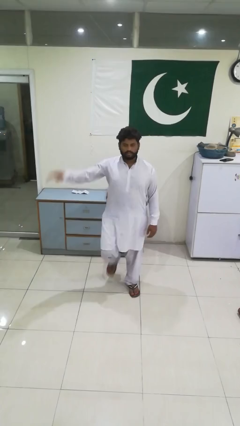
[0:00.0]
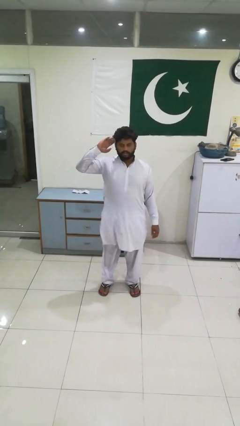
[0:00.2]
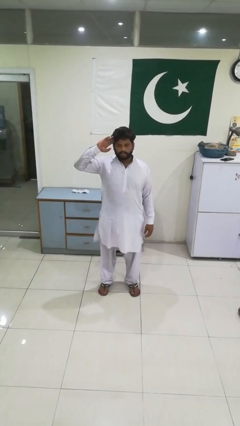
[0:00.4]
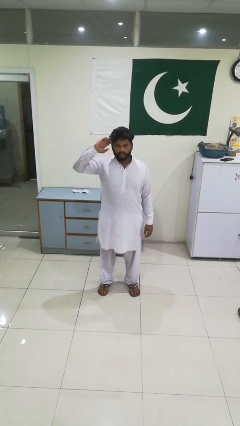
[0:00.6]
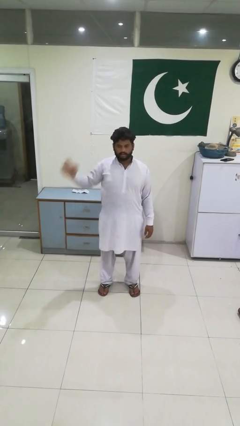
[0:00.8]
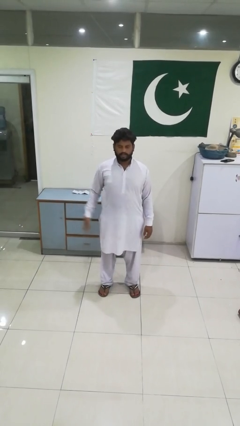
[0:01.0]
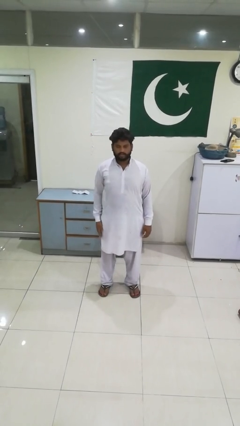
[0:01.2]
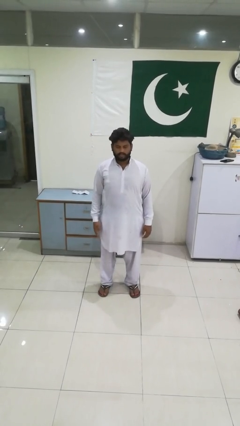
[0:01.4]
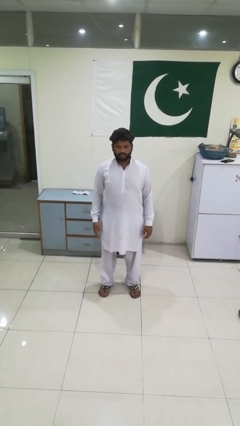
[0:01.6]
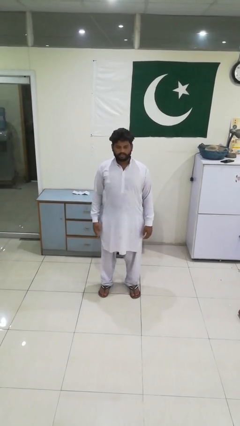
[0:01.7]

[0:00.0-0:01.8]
person salutes

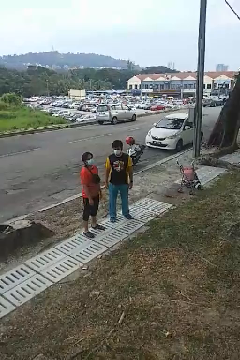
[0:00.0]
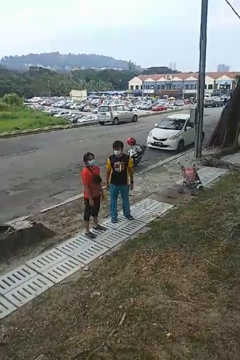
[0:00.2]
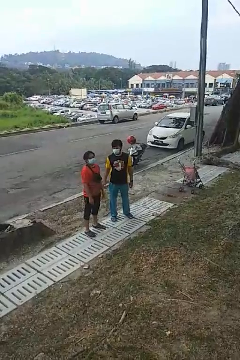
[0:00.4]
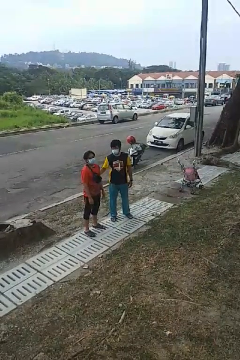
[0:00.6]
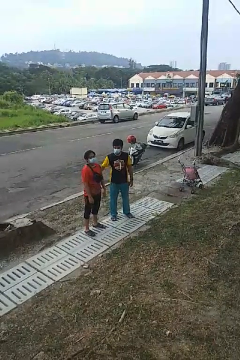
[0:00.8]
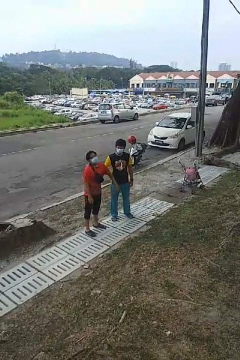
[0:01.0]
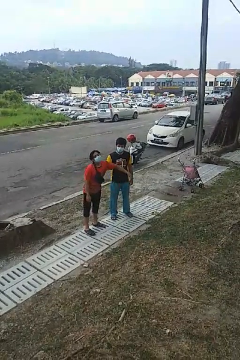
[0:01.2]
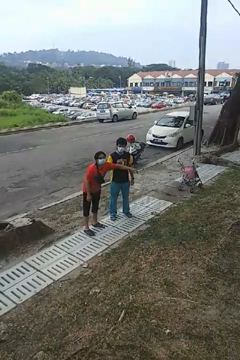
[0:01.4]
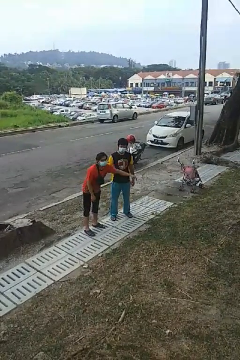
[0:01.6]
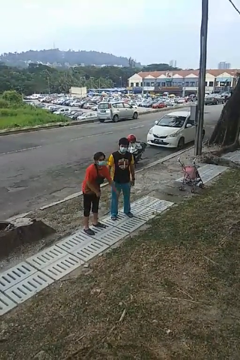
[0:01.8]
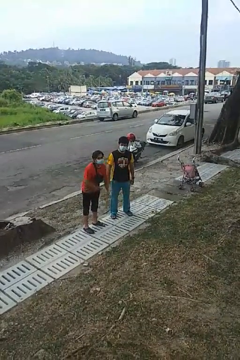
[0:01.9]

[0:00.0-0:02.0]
person grabs person by bicep

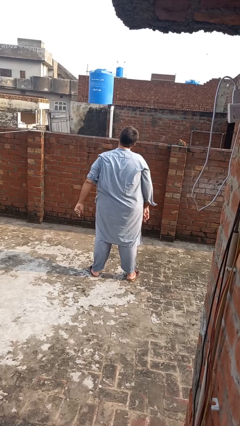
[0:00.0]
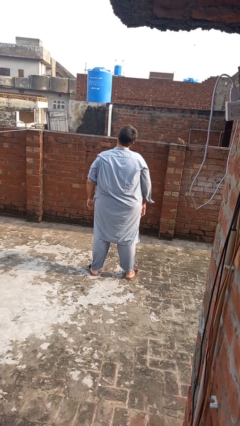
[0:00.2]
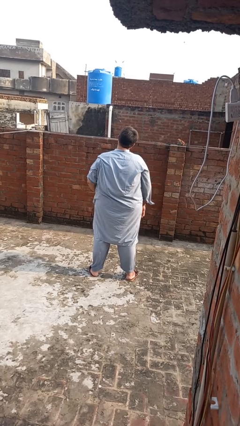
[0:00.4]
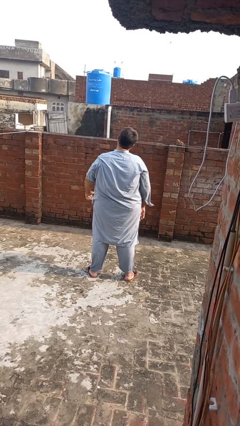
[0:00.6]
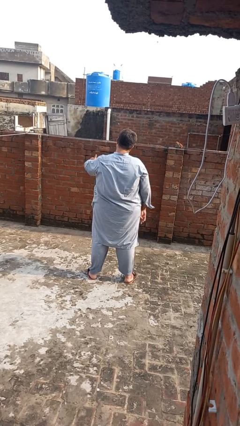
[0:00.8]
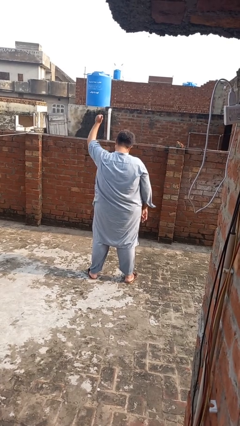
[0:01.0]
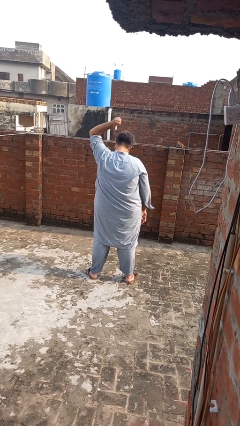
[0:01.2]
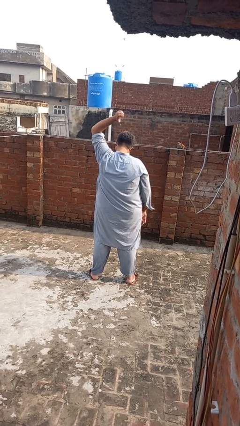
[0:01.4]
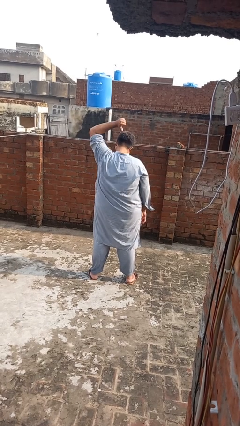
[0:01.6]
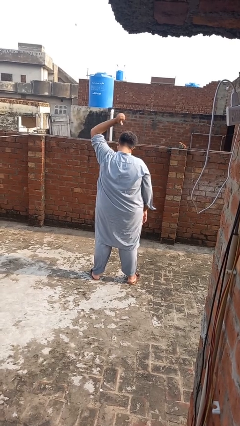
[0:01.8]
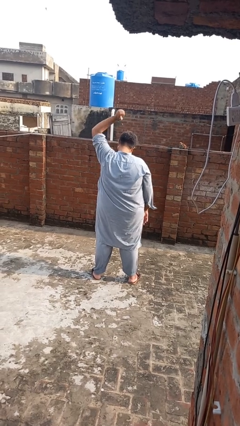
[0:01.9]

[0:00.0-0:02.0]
person gestures behind me

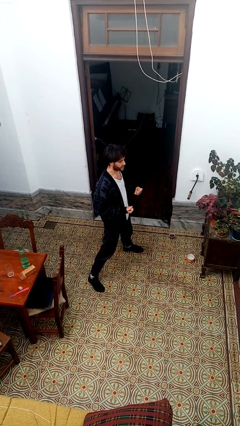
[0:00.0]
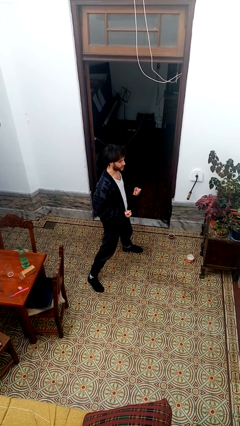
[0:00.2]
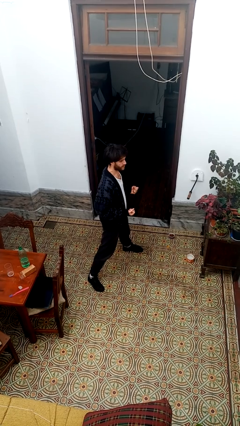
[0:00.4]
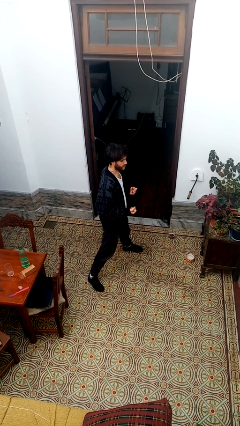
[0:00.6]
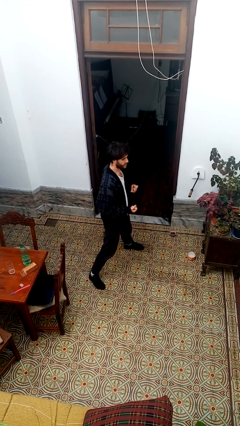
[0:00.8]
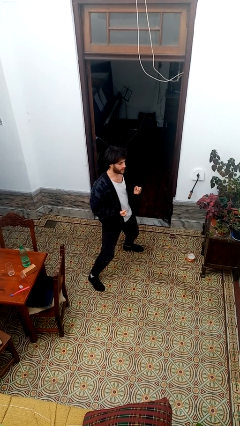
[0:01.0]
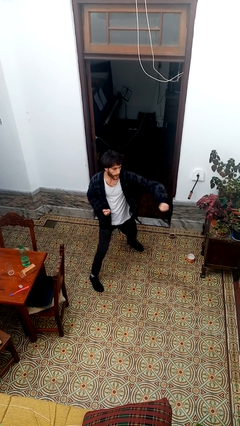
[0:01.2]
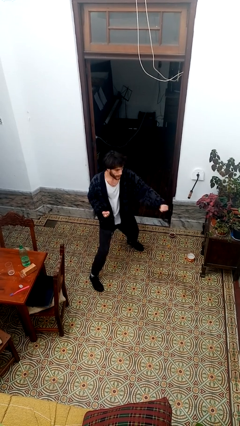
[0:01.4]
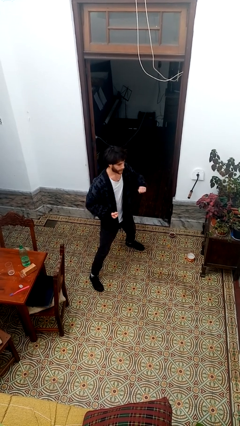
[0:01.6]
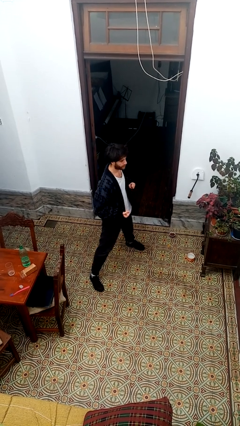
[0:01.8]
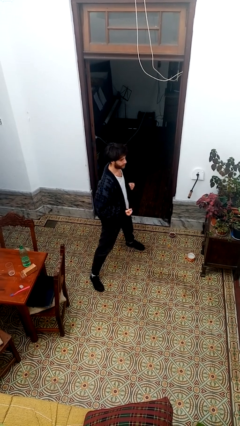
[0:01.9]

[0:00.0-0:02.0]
person punches

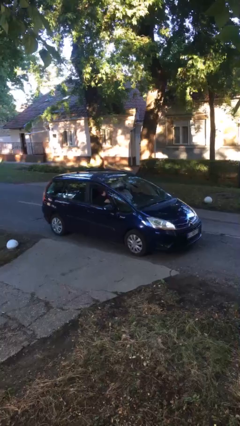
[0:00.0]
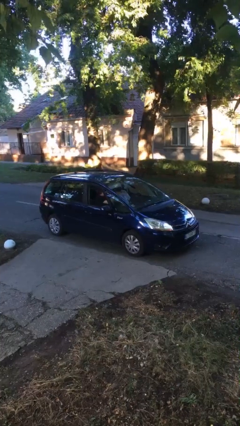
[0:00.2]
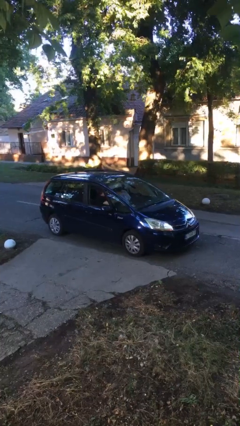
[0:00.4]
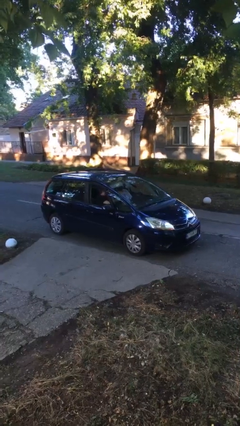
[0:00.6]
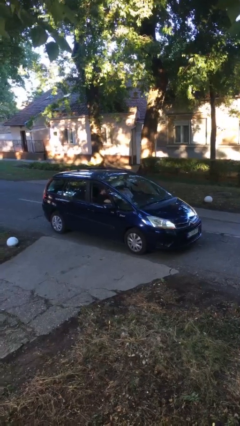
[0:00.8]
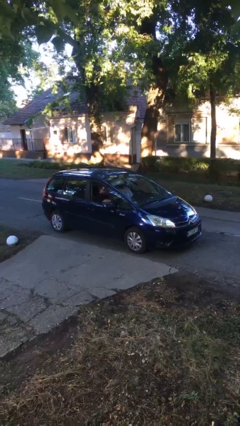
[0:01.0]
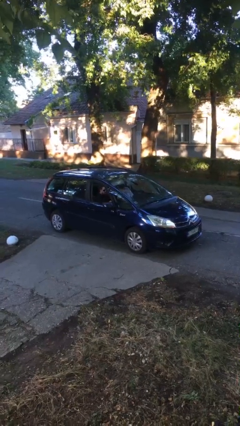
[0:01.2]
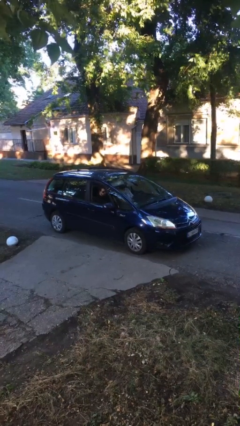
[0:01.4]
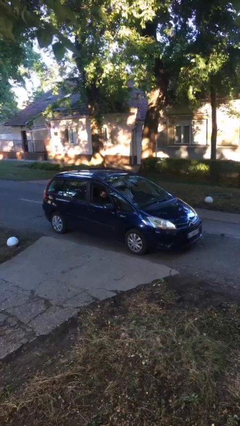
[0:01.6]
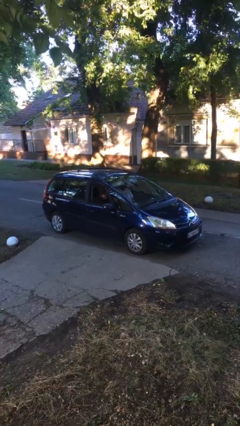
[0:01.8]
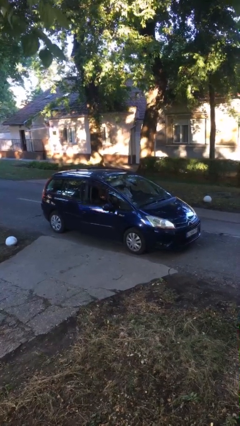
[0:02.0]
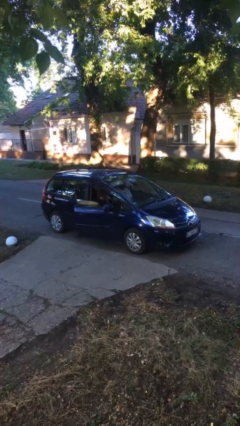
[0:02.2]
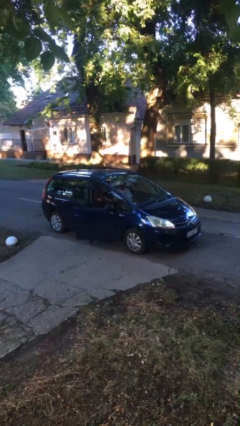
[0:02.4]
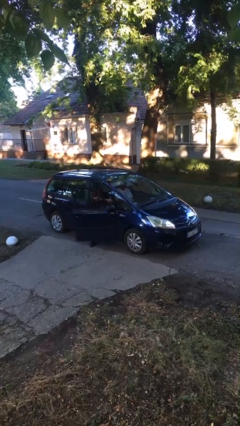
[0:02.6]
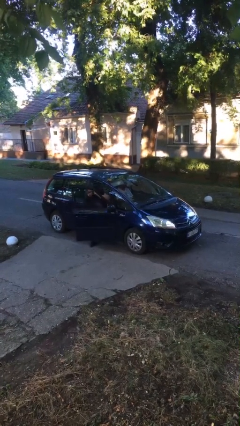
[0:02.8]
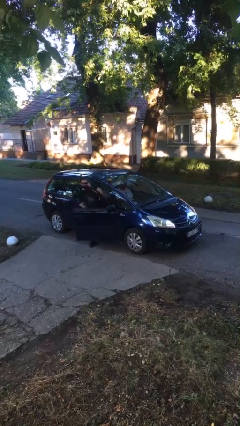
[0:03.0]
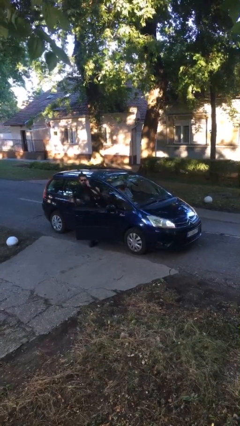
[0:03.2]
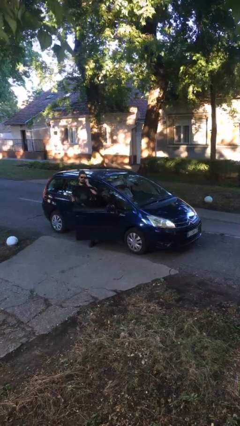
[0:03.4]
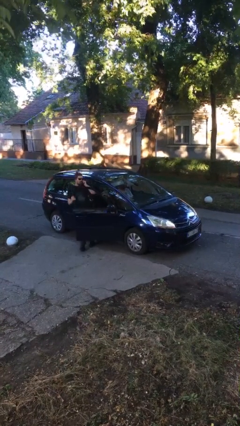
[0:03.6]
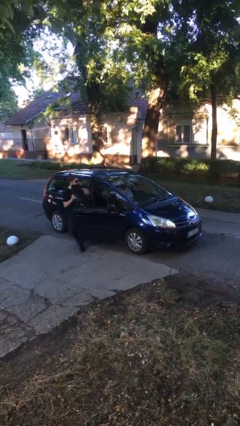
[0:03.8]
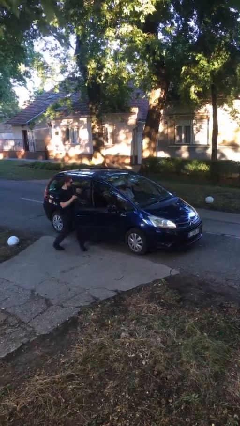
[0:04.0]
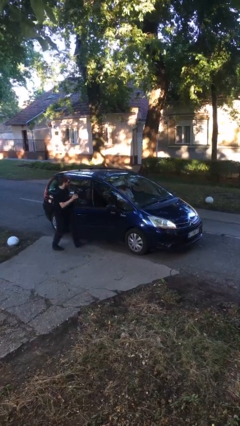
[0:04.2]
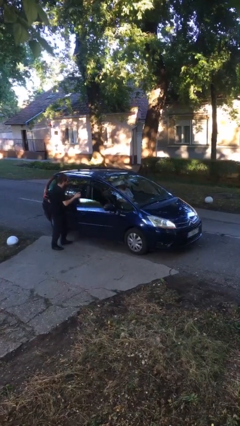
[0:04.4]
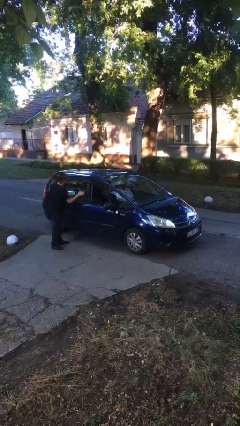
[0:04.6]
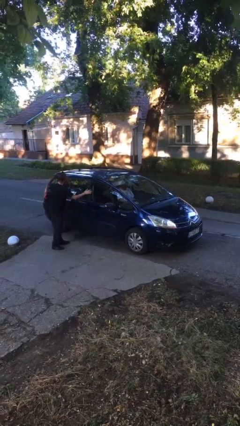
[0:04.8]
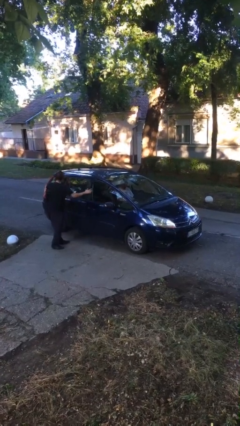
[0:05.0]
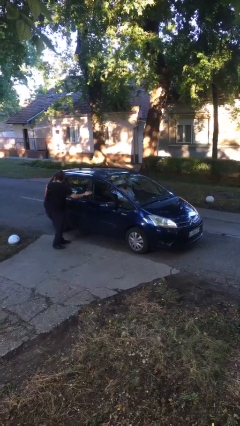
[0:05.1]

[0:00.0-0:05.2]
car drops off person

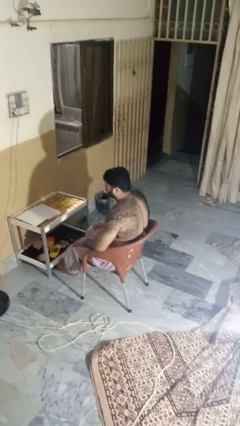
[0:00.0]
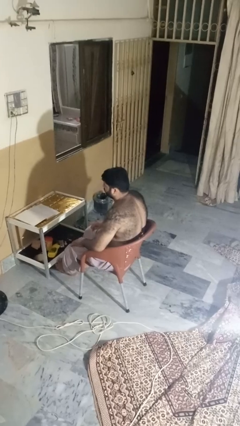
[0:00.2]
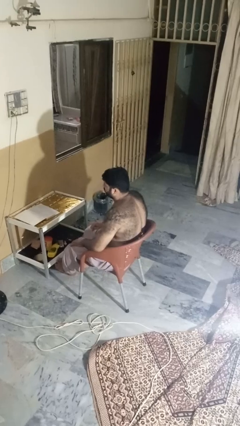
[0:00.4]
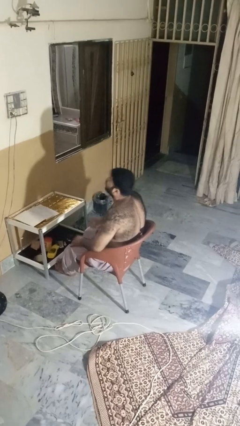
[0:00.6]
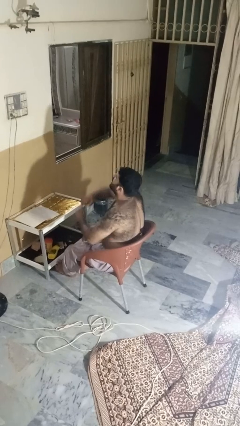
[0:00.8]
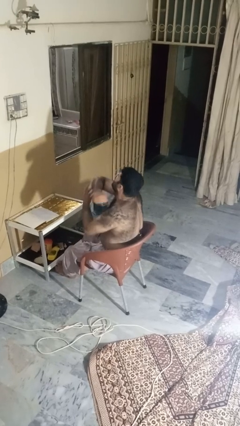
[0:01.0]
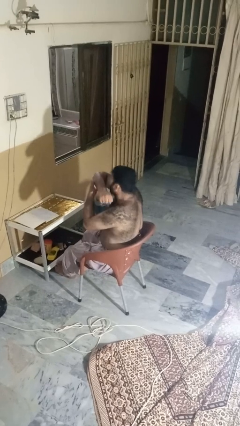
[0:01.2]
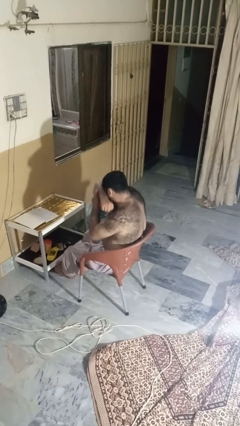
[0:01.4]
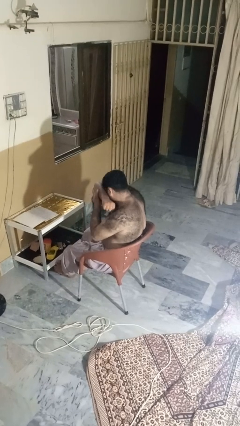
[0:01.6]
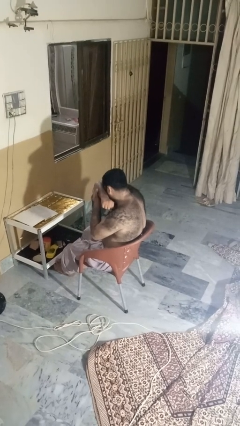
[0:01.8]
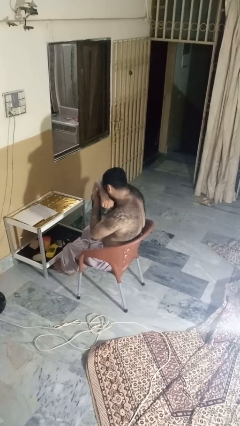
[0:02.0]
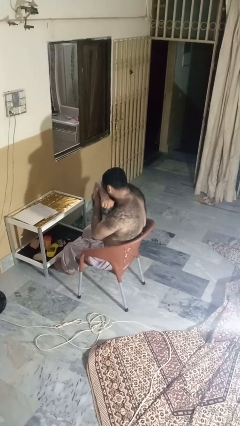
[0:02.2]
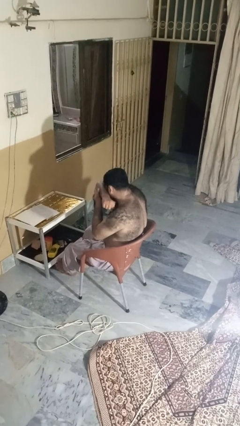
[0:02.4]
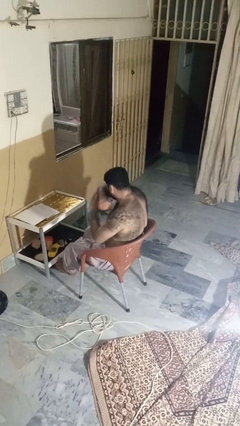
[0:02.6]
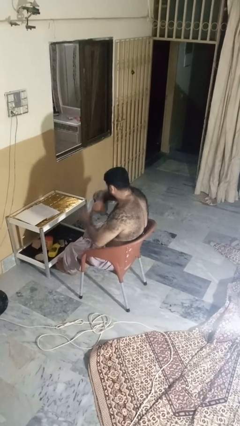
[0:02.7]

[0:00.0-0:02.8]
person sneezes into arm

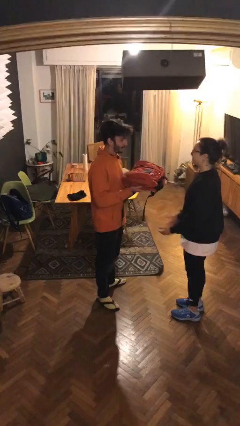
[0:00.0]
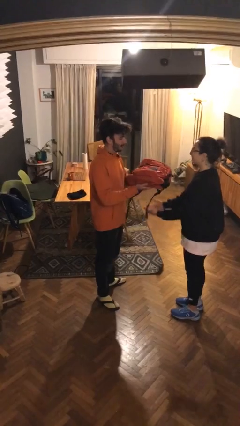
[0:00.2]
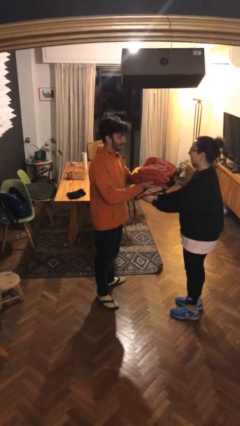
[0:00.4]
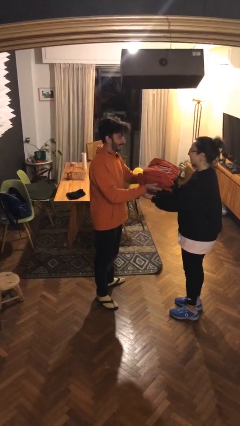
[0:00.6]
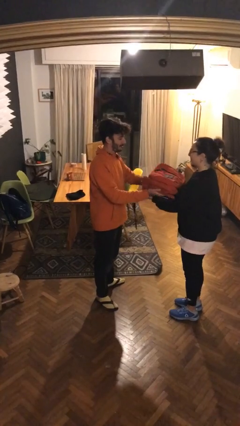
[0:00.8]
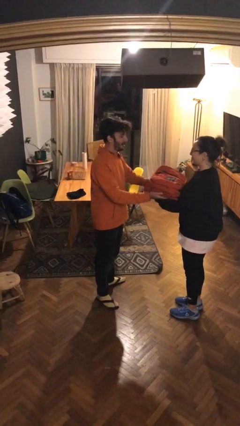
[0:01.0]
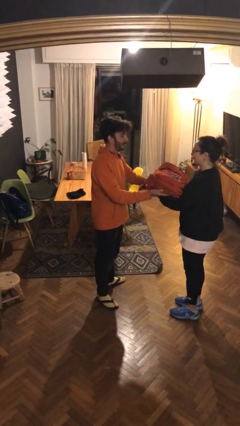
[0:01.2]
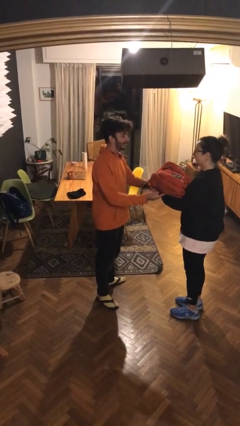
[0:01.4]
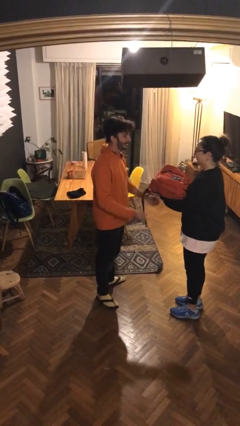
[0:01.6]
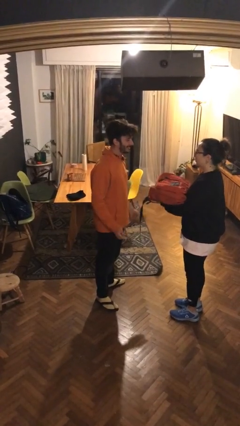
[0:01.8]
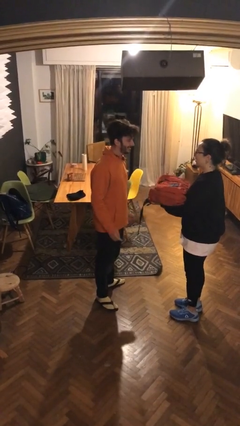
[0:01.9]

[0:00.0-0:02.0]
person transfers object to person
